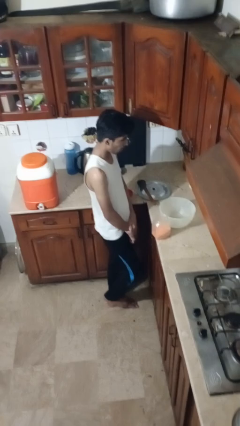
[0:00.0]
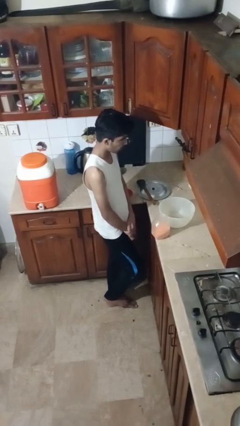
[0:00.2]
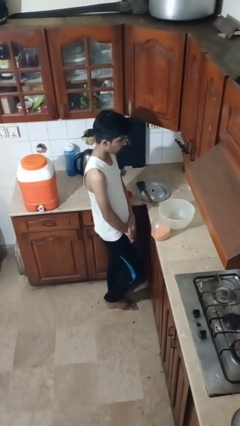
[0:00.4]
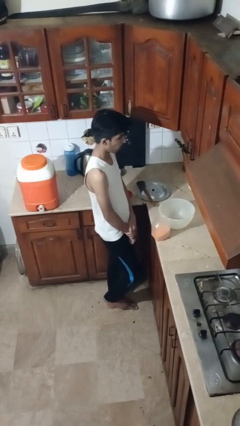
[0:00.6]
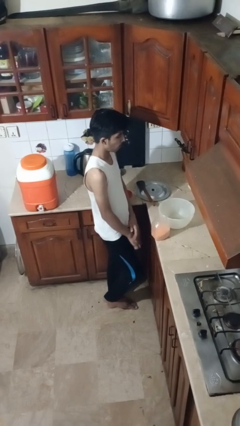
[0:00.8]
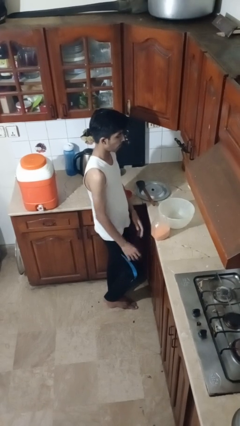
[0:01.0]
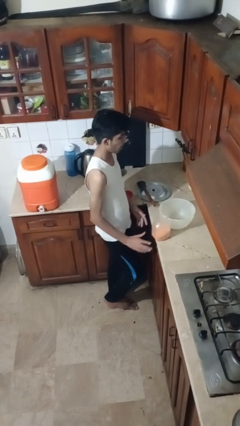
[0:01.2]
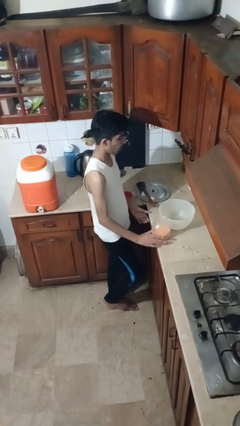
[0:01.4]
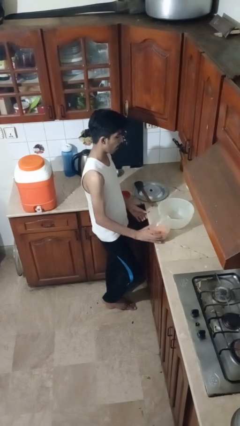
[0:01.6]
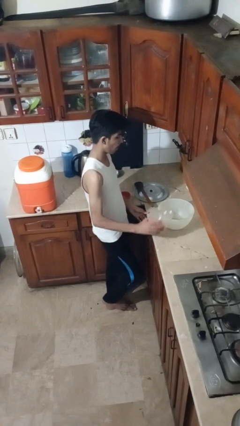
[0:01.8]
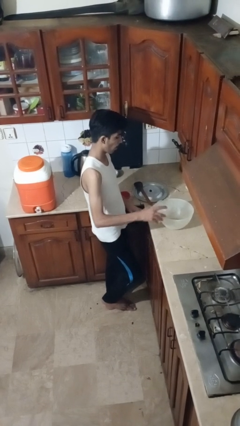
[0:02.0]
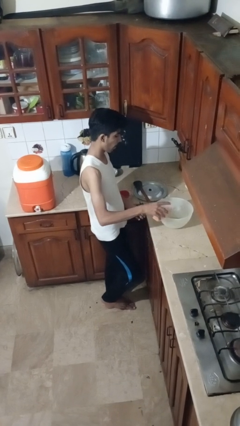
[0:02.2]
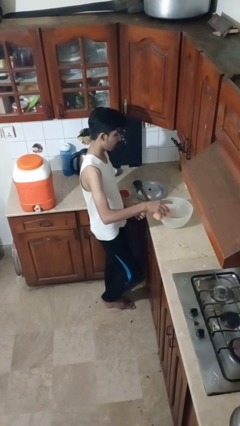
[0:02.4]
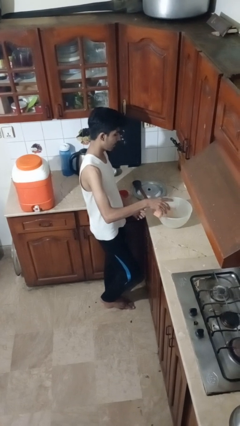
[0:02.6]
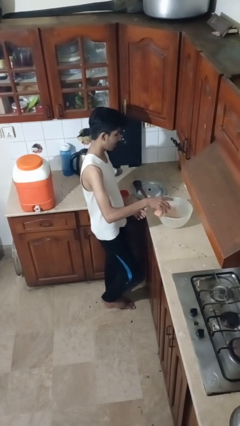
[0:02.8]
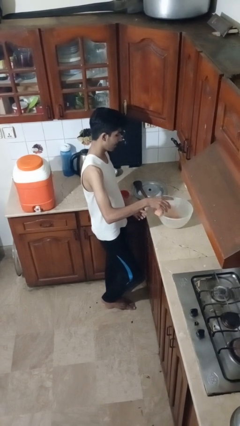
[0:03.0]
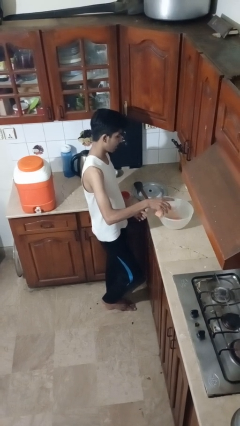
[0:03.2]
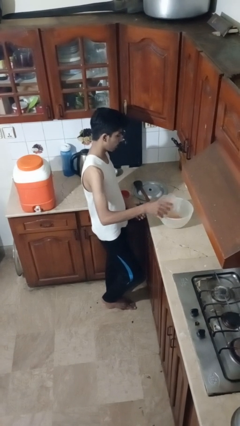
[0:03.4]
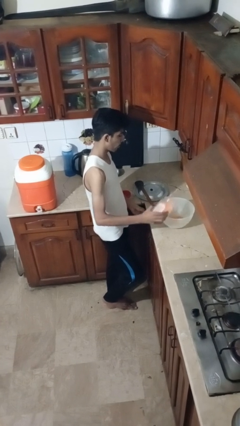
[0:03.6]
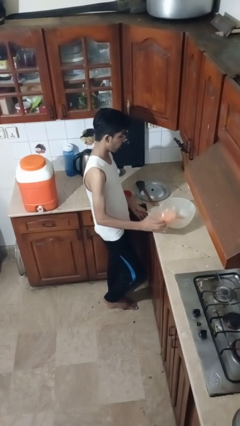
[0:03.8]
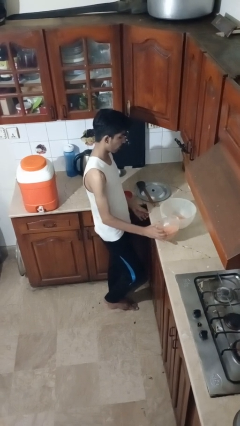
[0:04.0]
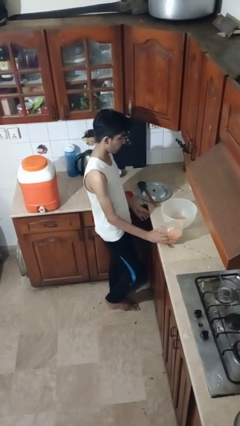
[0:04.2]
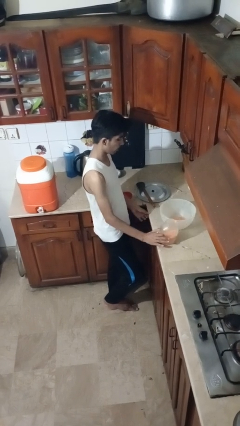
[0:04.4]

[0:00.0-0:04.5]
person pours into bowl

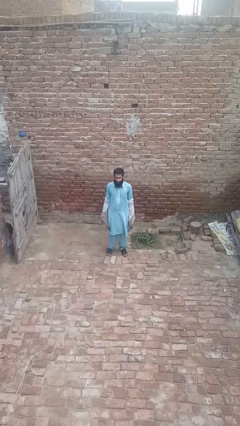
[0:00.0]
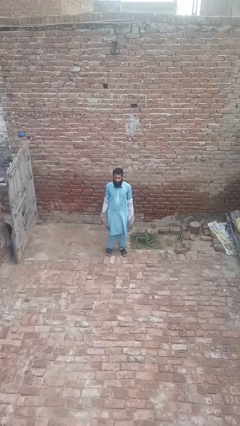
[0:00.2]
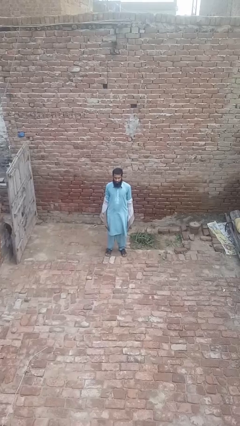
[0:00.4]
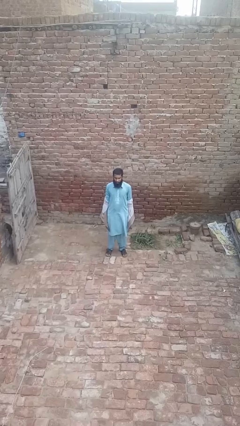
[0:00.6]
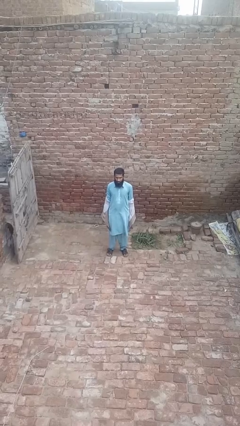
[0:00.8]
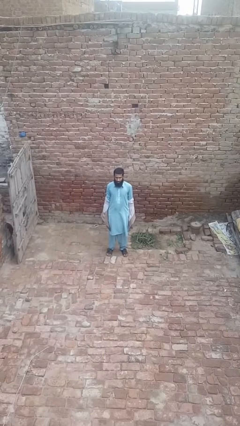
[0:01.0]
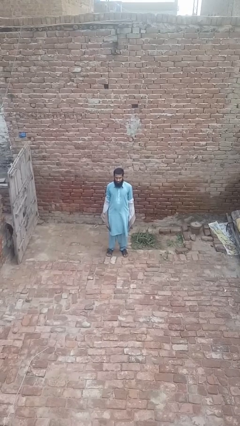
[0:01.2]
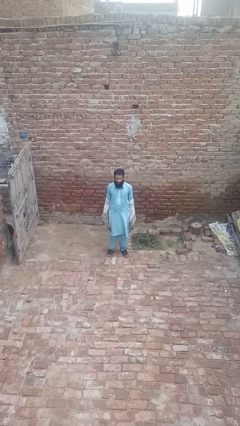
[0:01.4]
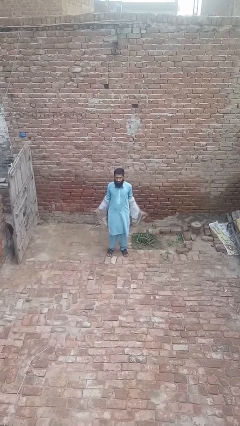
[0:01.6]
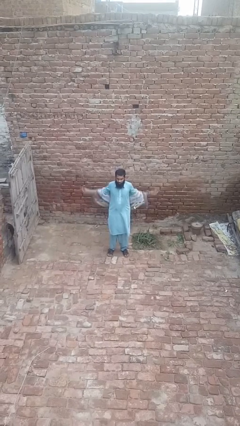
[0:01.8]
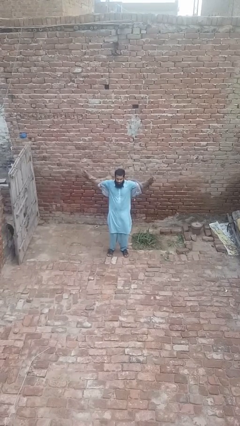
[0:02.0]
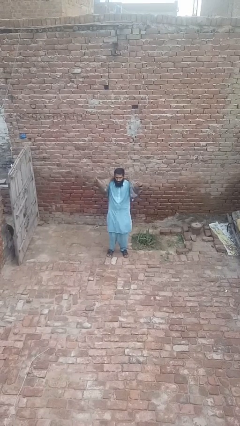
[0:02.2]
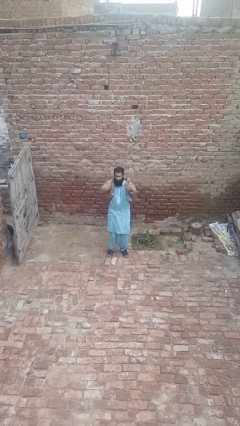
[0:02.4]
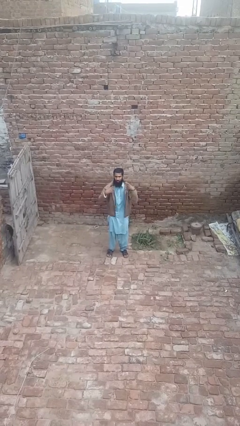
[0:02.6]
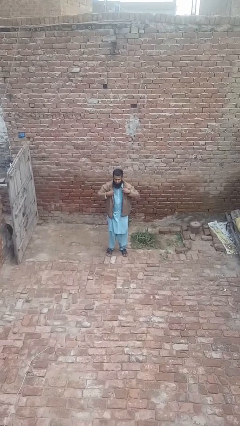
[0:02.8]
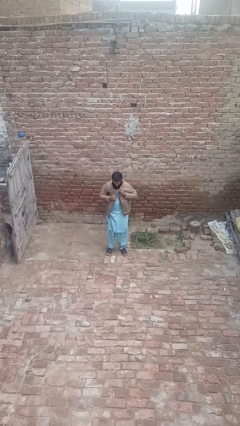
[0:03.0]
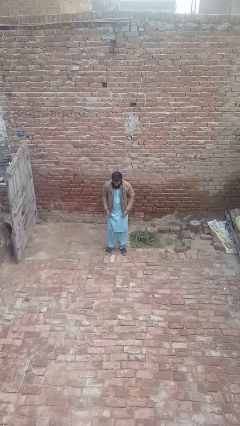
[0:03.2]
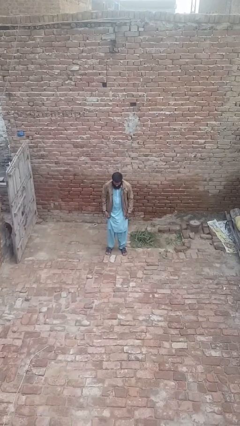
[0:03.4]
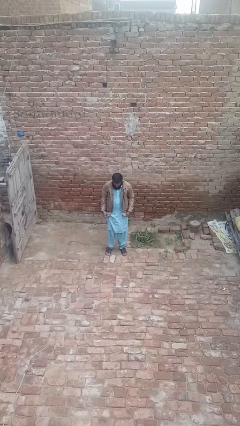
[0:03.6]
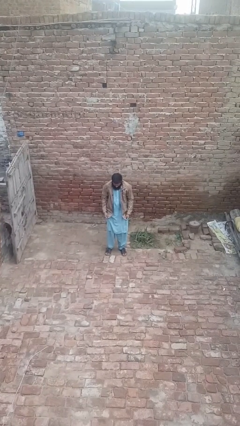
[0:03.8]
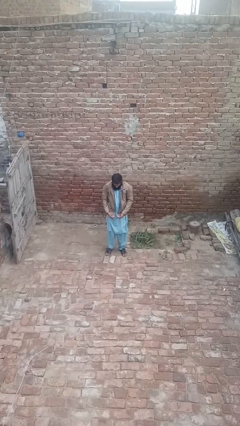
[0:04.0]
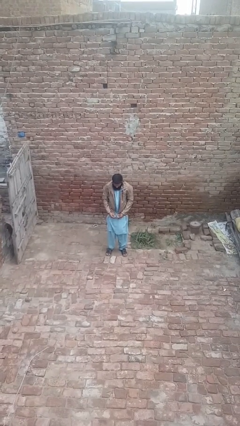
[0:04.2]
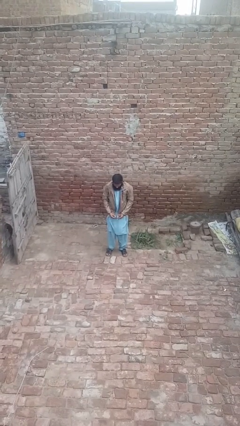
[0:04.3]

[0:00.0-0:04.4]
person puts on jacket

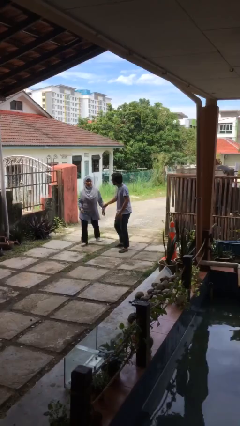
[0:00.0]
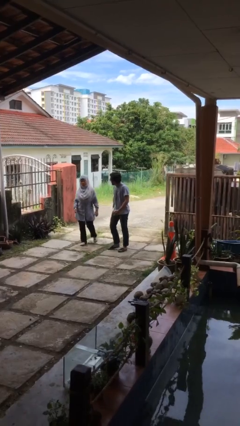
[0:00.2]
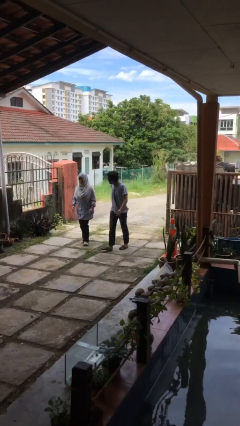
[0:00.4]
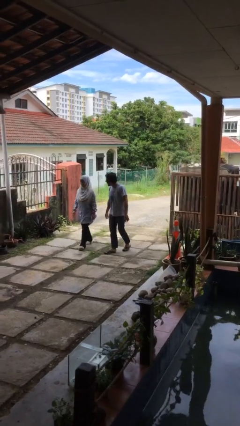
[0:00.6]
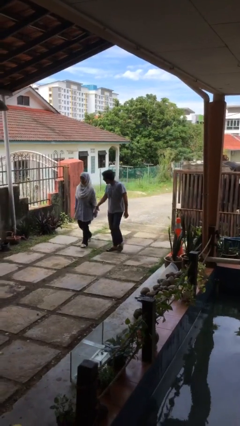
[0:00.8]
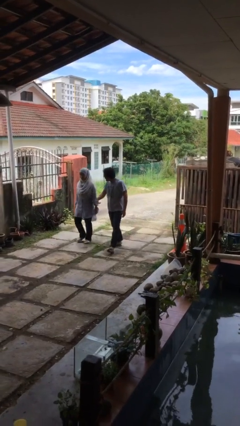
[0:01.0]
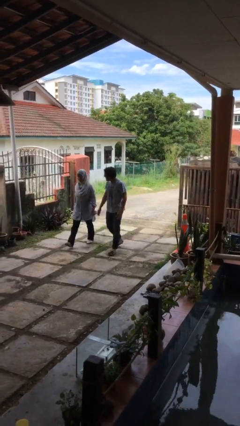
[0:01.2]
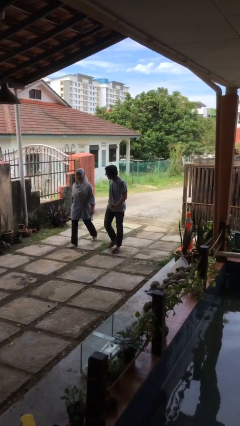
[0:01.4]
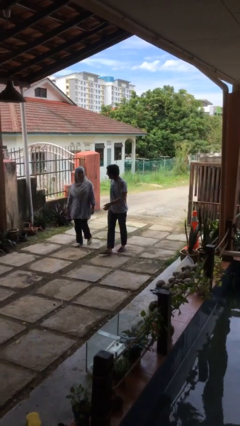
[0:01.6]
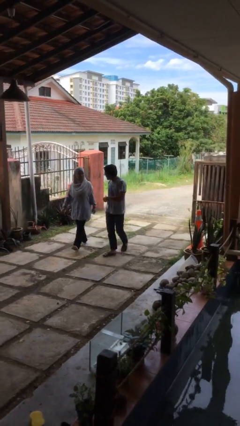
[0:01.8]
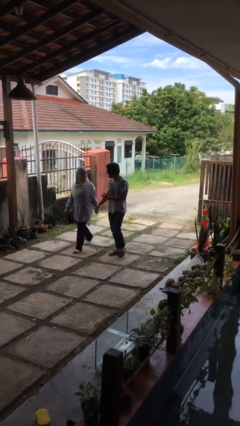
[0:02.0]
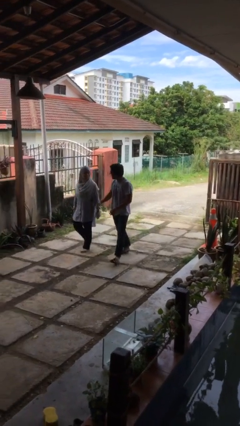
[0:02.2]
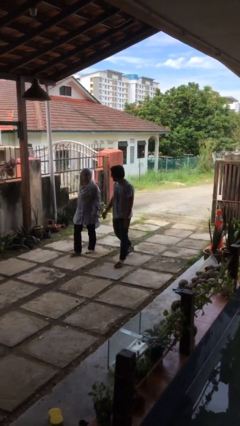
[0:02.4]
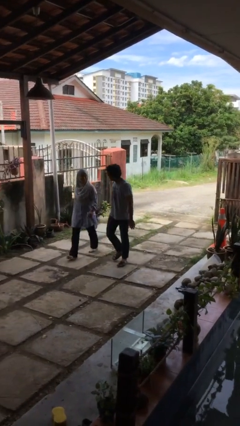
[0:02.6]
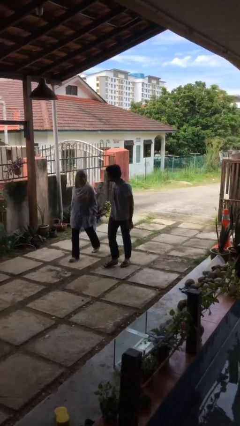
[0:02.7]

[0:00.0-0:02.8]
person talks to person

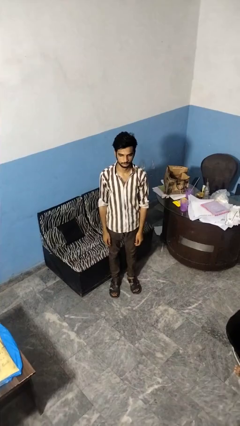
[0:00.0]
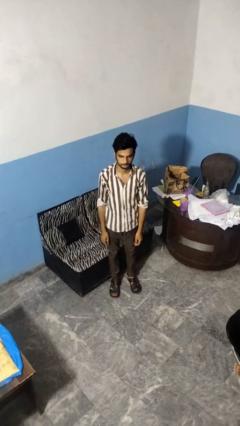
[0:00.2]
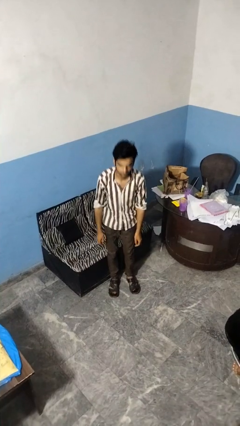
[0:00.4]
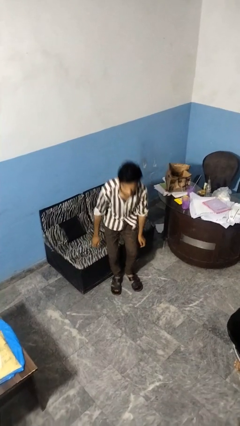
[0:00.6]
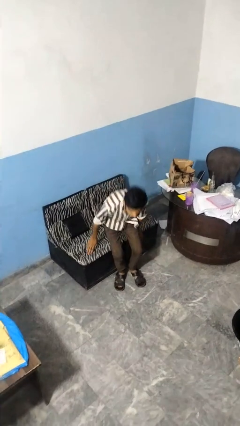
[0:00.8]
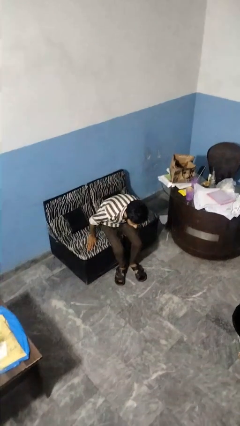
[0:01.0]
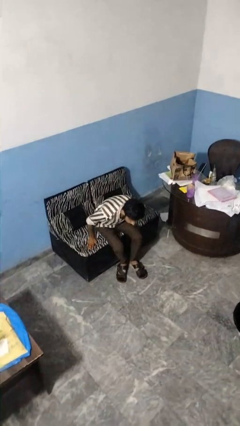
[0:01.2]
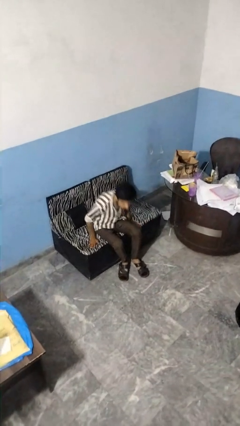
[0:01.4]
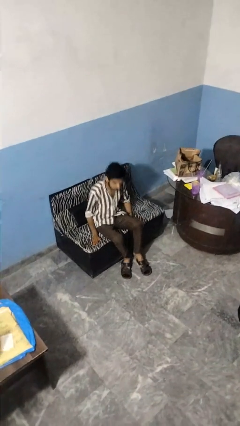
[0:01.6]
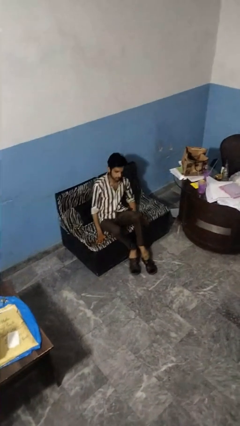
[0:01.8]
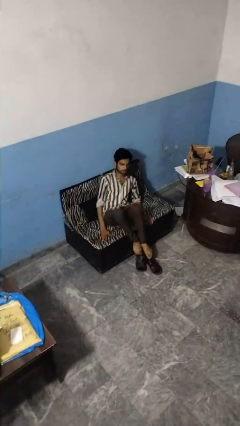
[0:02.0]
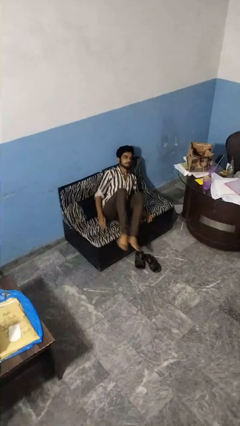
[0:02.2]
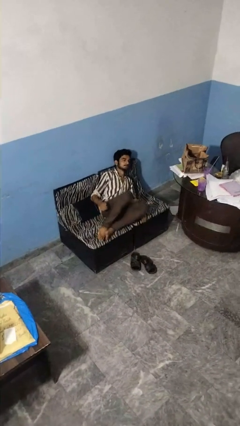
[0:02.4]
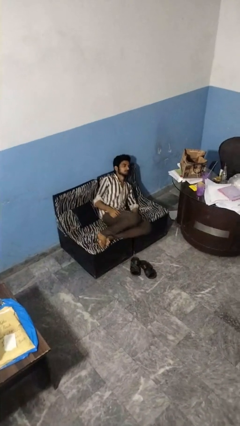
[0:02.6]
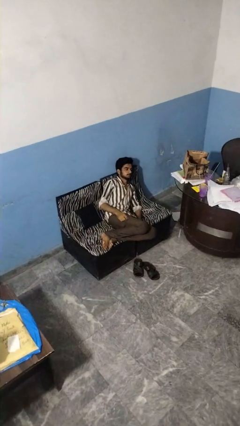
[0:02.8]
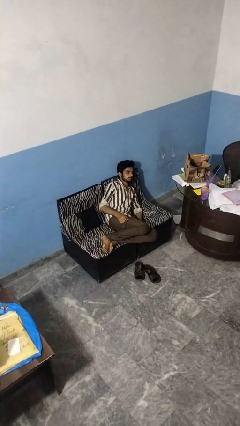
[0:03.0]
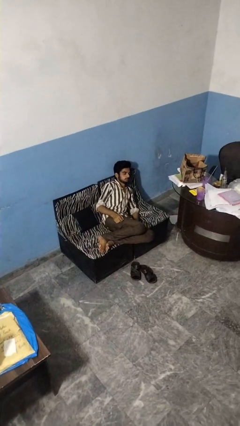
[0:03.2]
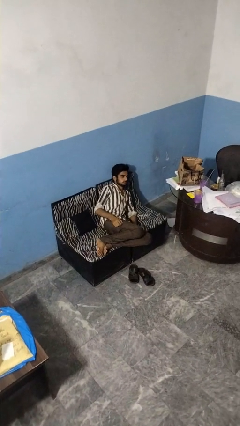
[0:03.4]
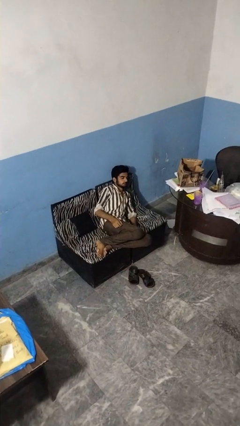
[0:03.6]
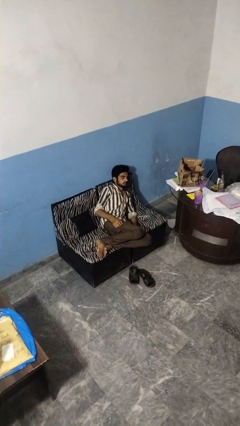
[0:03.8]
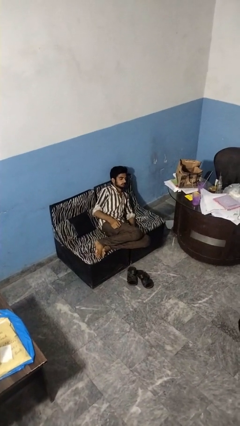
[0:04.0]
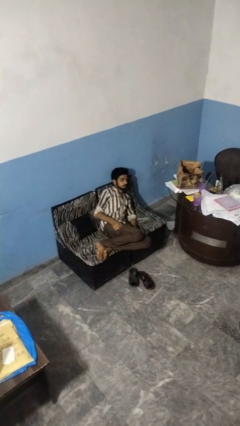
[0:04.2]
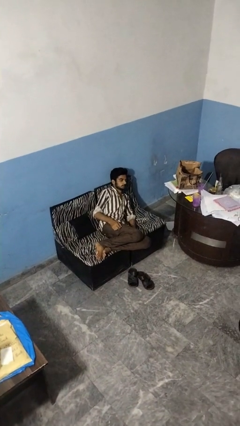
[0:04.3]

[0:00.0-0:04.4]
person lies down on couch

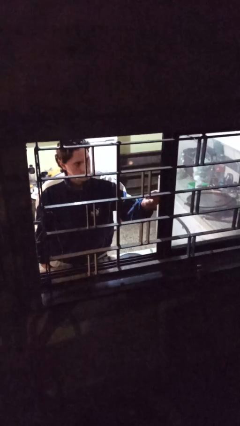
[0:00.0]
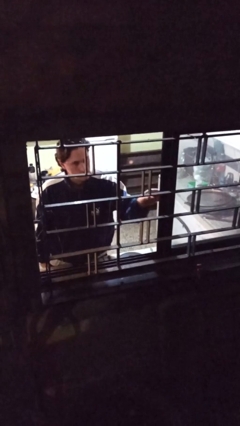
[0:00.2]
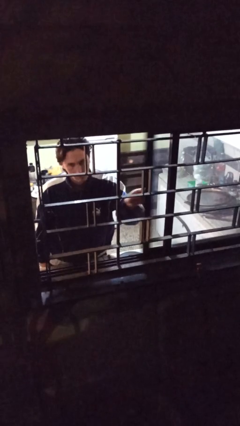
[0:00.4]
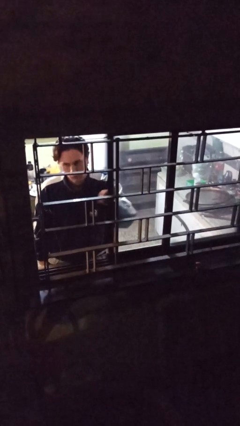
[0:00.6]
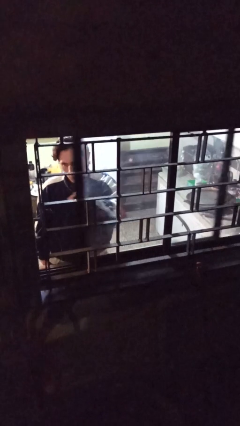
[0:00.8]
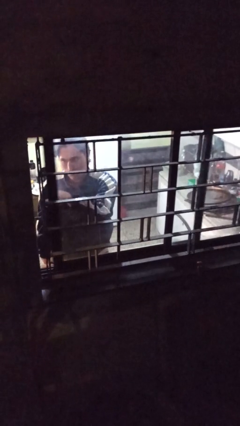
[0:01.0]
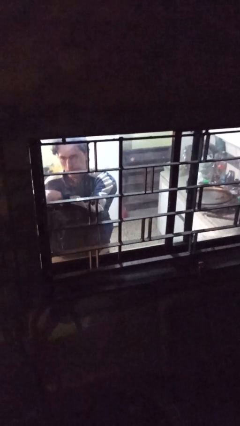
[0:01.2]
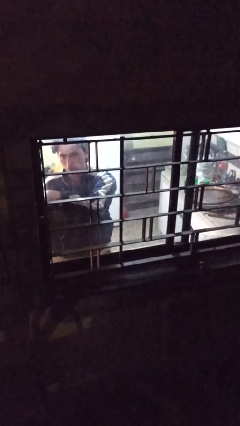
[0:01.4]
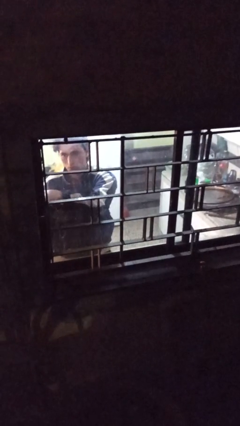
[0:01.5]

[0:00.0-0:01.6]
person closes home window
